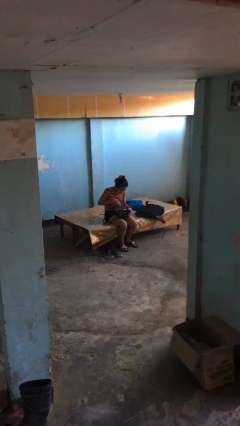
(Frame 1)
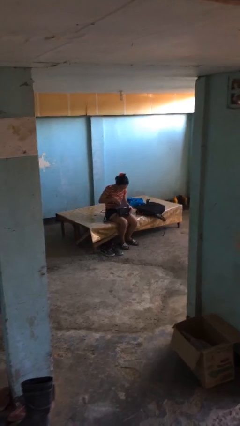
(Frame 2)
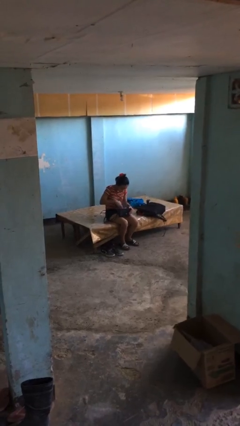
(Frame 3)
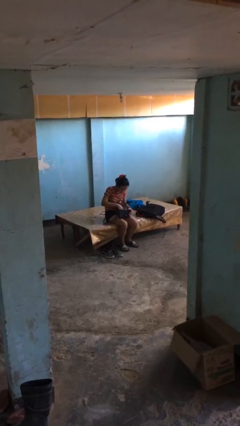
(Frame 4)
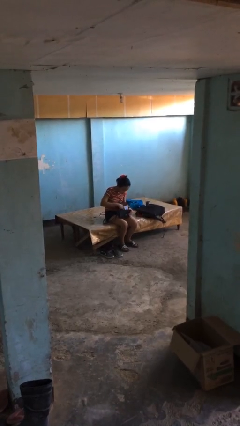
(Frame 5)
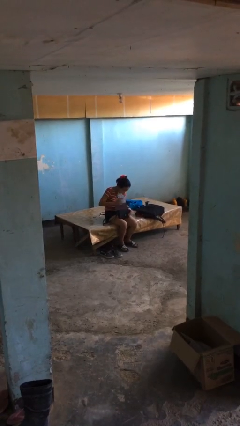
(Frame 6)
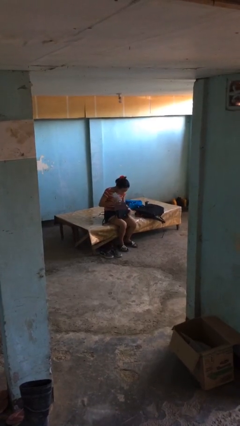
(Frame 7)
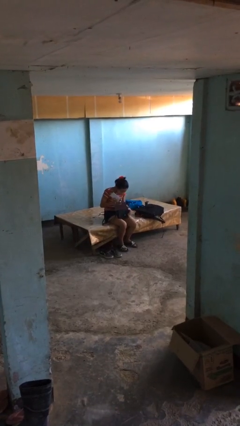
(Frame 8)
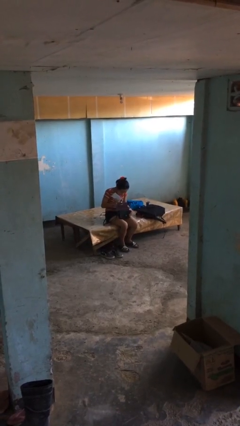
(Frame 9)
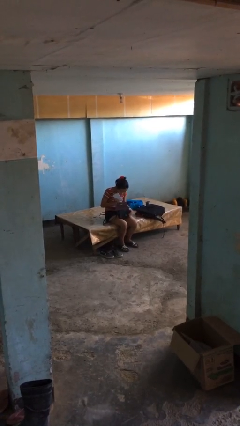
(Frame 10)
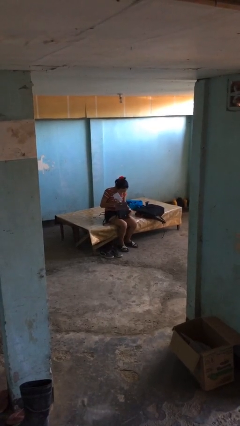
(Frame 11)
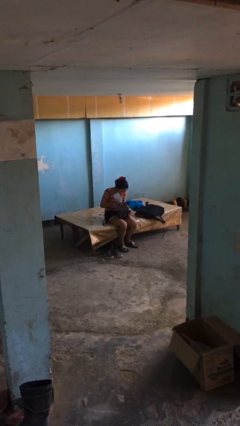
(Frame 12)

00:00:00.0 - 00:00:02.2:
person takes object from purse

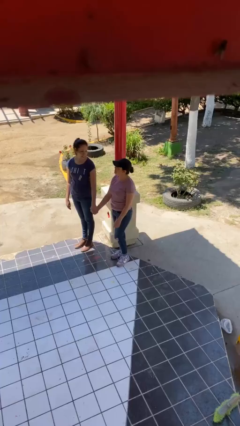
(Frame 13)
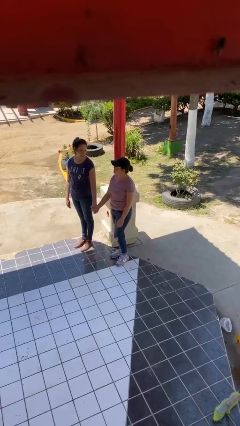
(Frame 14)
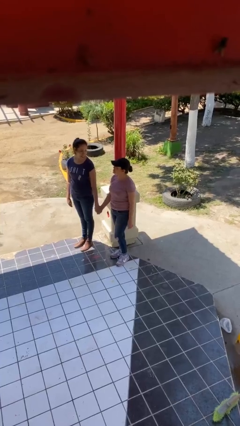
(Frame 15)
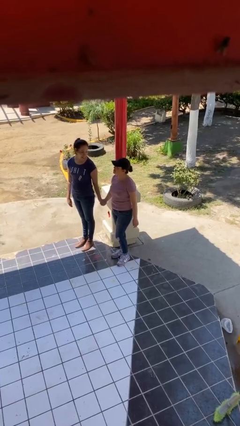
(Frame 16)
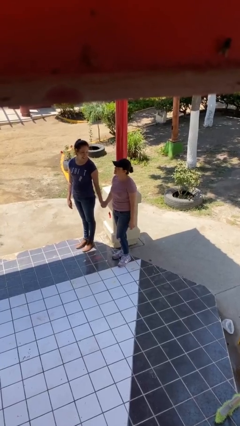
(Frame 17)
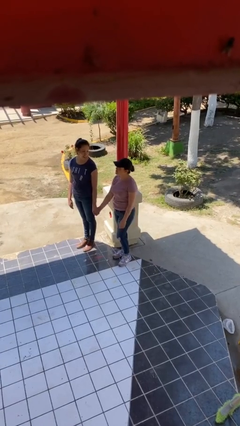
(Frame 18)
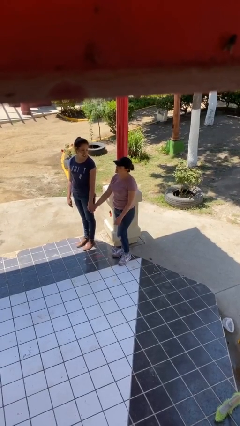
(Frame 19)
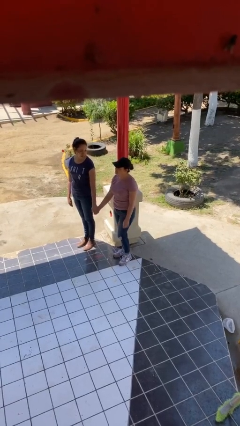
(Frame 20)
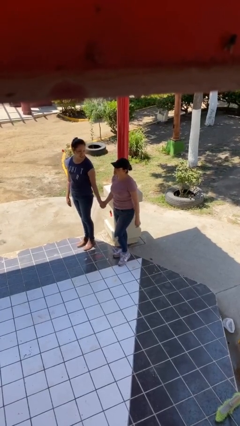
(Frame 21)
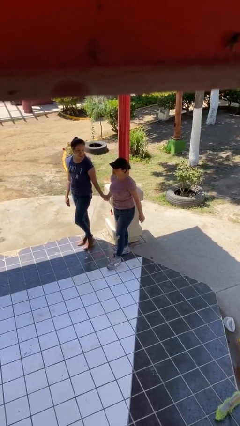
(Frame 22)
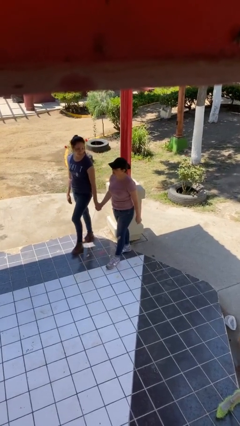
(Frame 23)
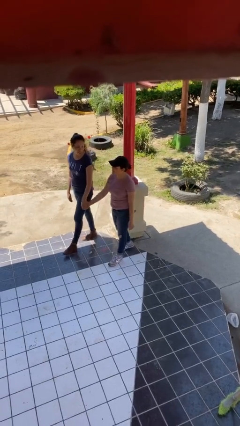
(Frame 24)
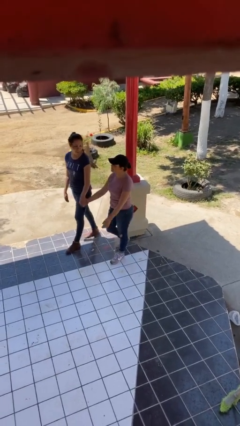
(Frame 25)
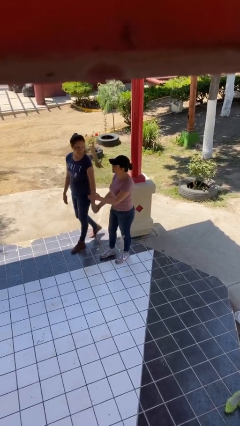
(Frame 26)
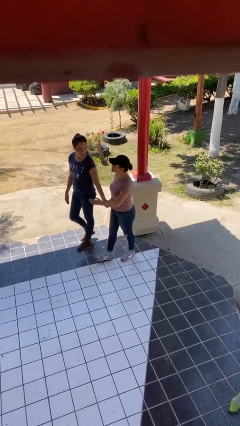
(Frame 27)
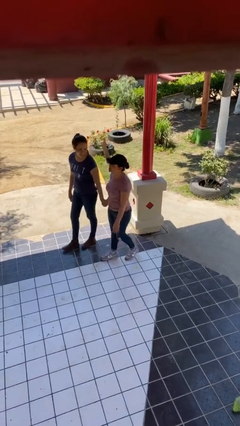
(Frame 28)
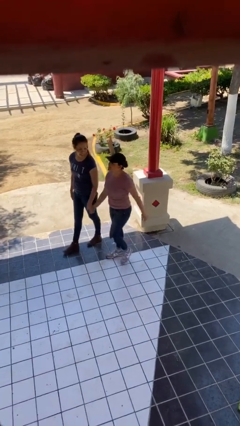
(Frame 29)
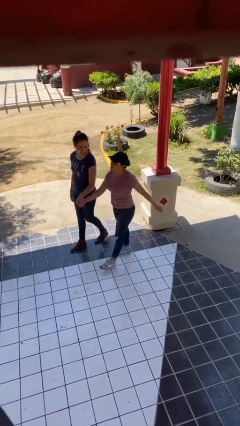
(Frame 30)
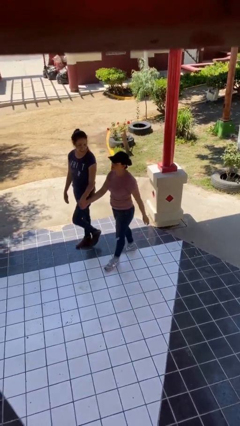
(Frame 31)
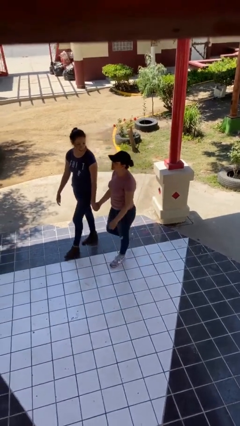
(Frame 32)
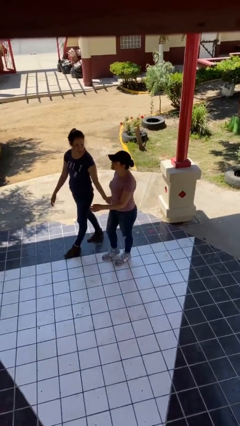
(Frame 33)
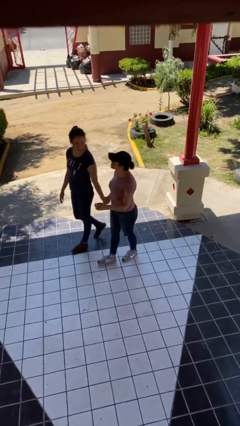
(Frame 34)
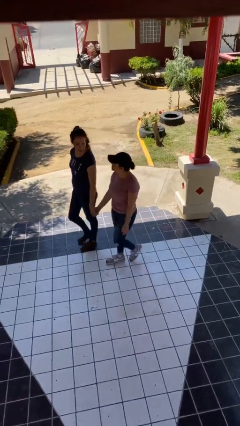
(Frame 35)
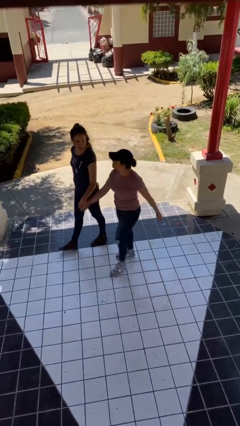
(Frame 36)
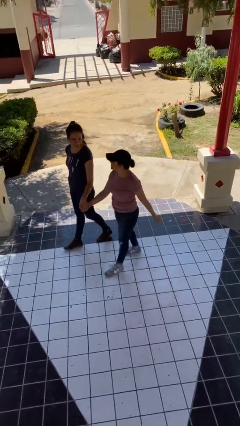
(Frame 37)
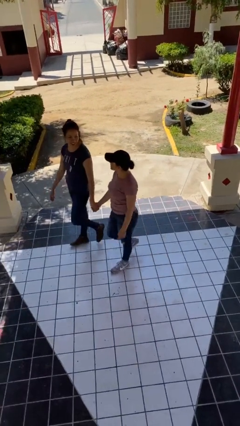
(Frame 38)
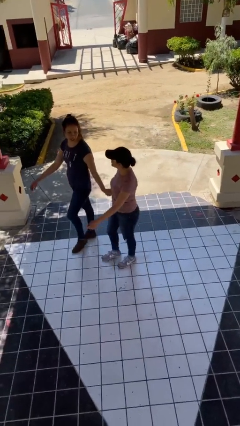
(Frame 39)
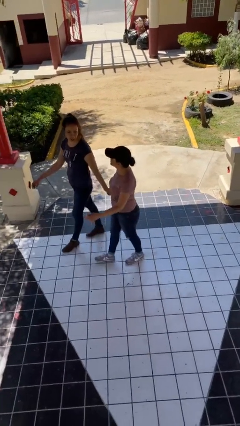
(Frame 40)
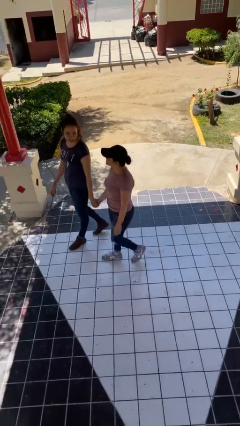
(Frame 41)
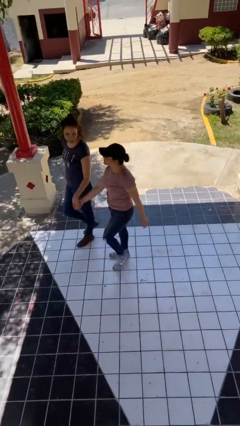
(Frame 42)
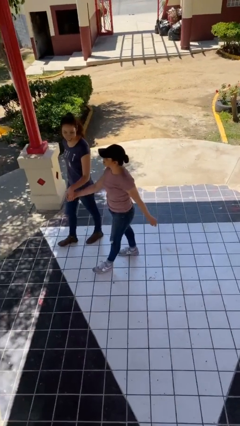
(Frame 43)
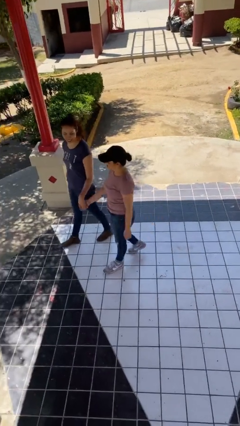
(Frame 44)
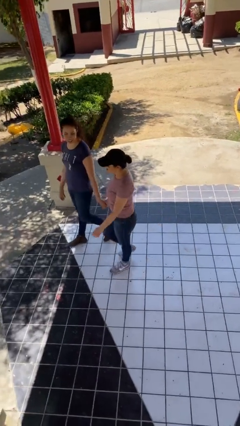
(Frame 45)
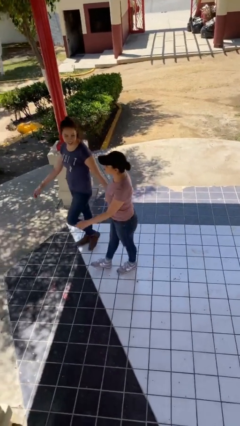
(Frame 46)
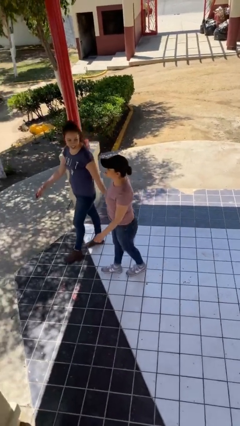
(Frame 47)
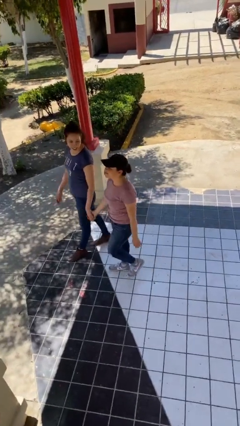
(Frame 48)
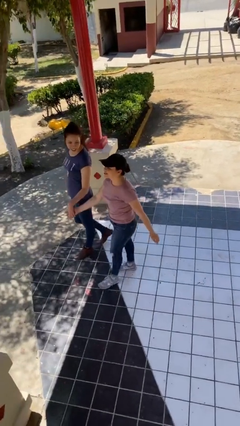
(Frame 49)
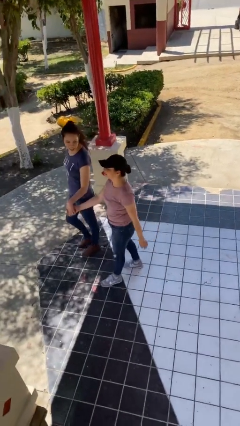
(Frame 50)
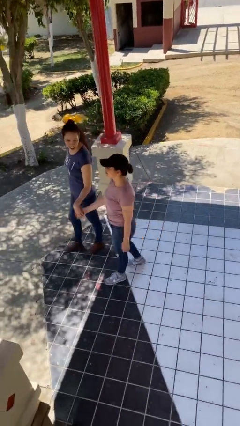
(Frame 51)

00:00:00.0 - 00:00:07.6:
person holds hand

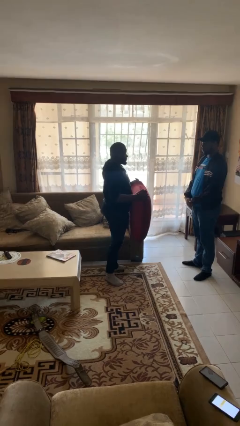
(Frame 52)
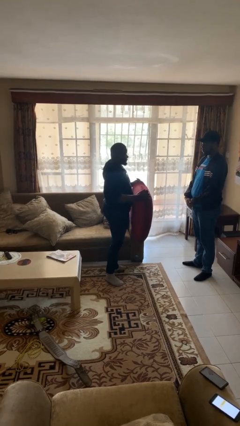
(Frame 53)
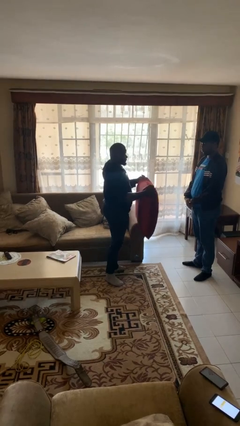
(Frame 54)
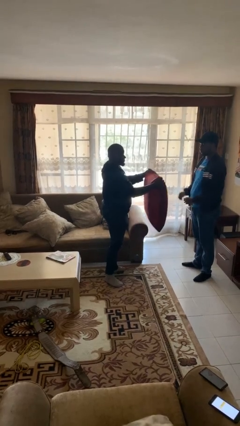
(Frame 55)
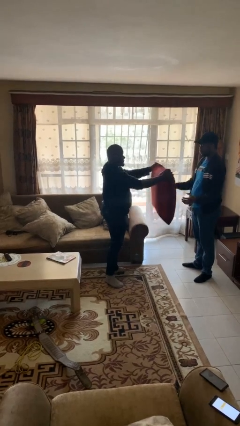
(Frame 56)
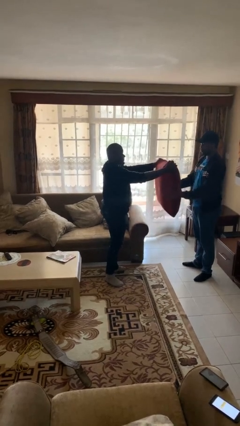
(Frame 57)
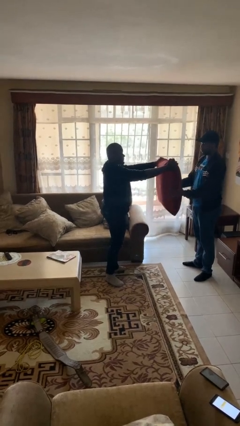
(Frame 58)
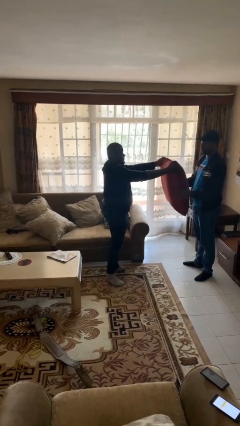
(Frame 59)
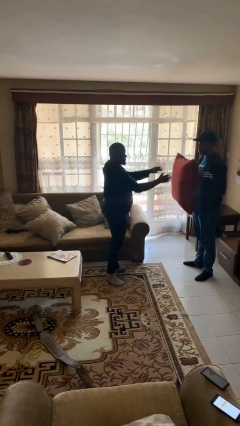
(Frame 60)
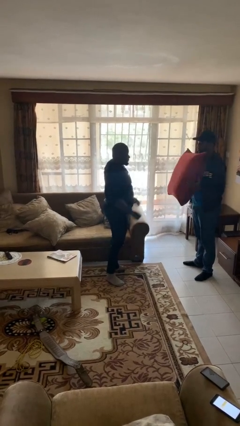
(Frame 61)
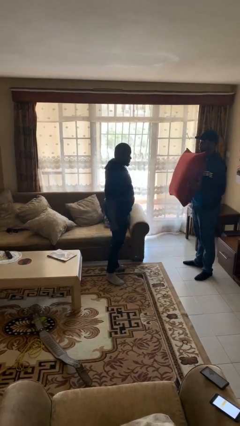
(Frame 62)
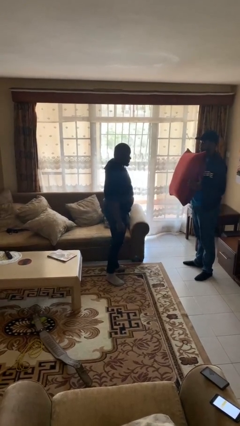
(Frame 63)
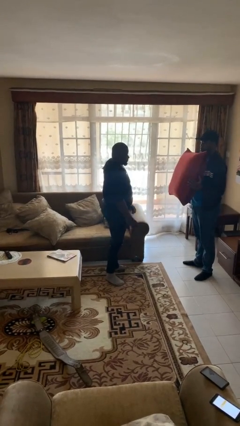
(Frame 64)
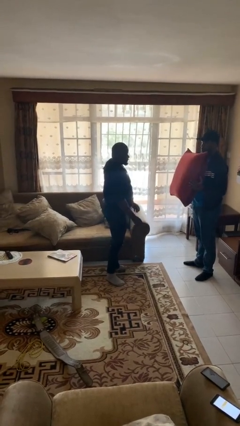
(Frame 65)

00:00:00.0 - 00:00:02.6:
person transfers object to person

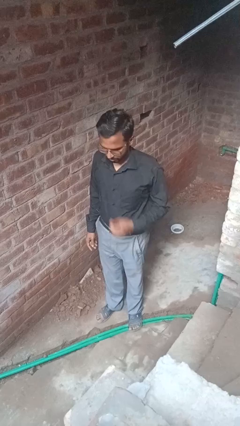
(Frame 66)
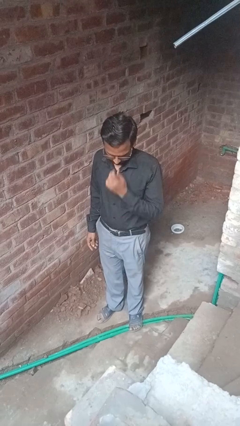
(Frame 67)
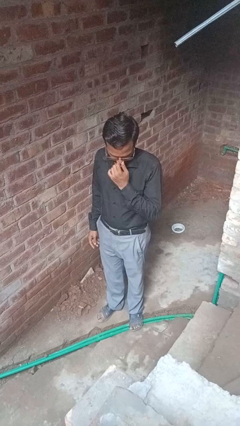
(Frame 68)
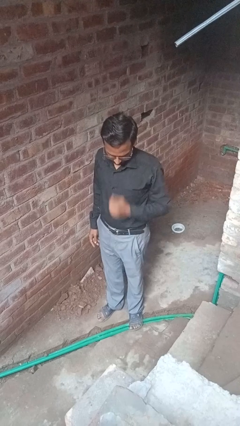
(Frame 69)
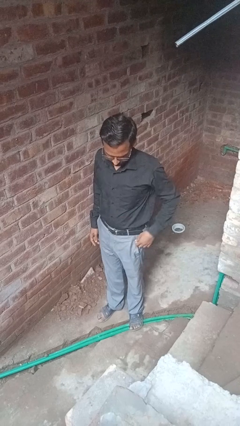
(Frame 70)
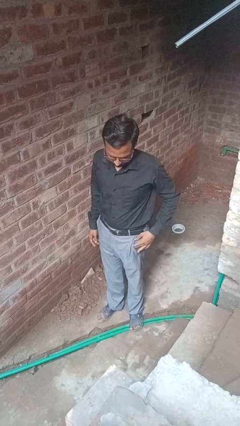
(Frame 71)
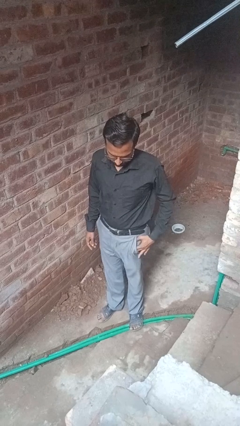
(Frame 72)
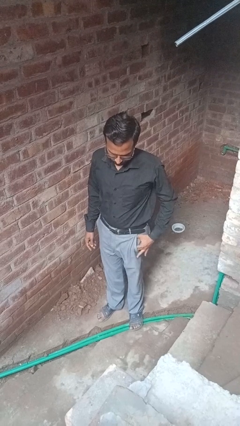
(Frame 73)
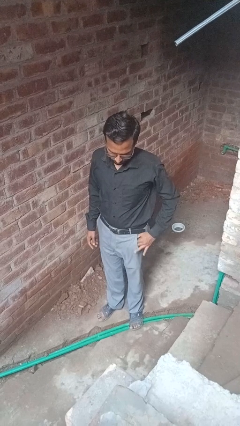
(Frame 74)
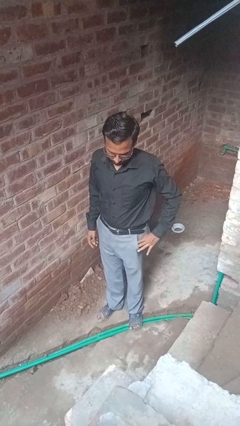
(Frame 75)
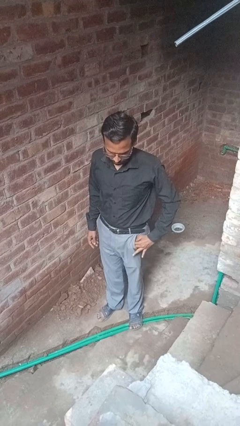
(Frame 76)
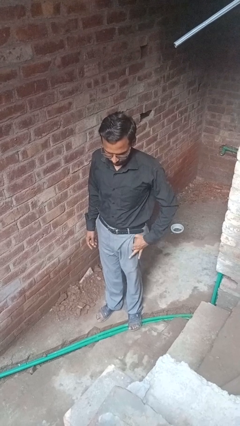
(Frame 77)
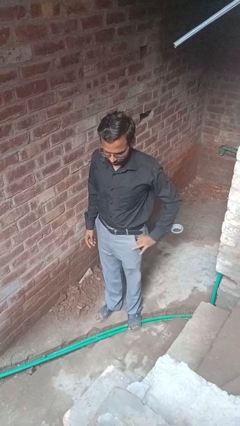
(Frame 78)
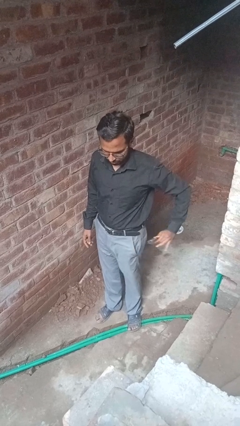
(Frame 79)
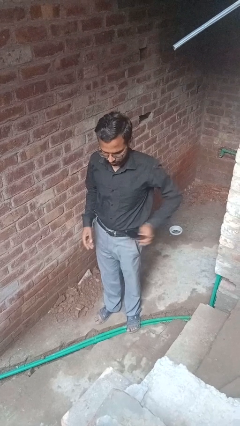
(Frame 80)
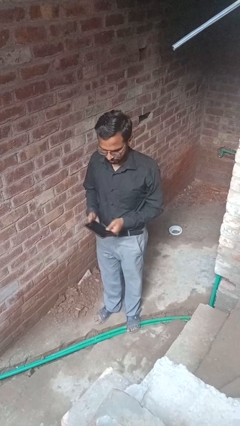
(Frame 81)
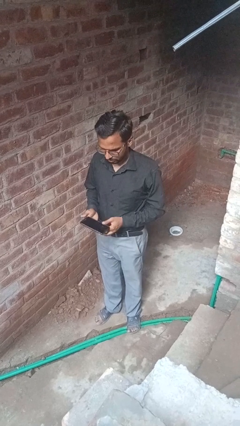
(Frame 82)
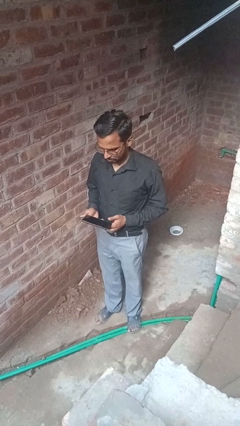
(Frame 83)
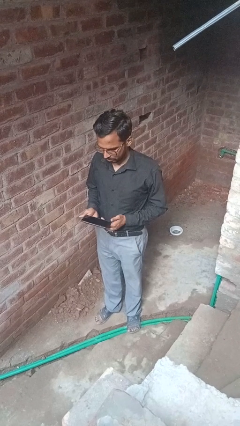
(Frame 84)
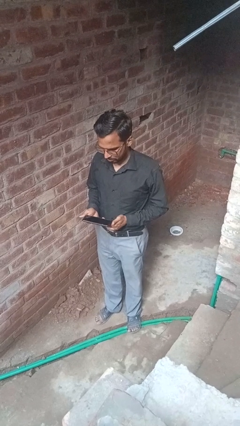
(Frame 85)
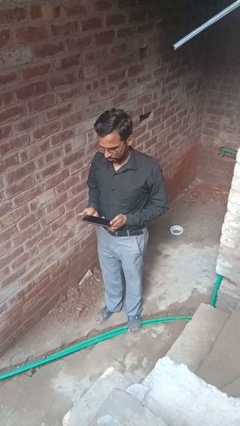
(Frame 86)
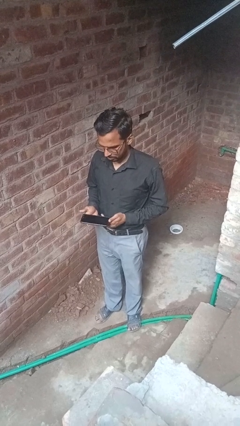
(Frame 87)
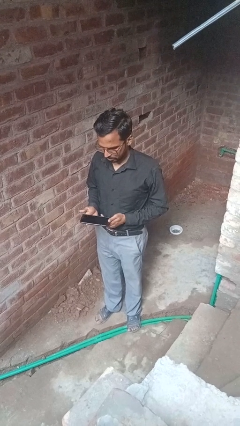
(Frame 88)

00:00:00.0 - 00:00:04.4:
person takes phone from pocket

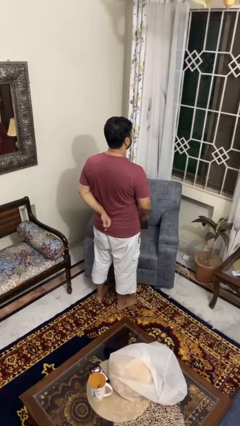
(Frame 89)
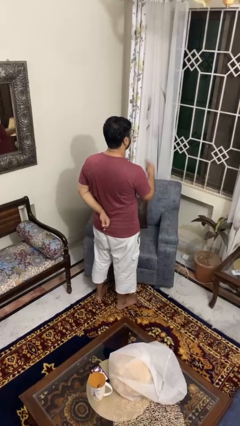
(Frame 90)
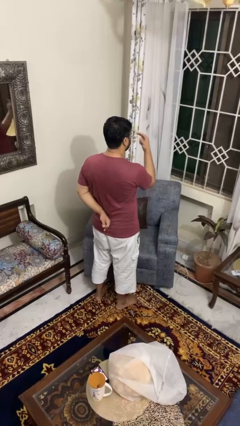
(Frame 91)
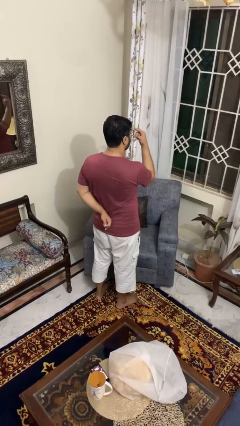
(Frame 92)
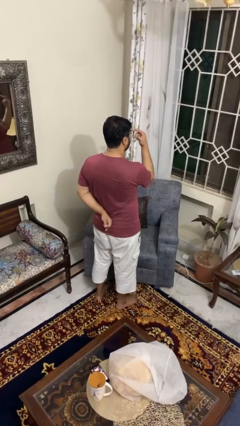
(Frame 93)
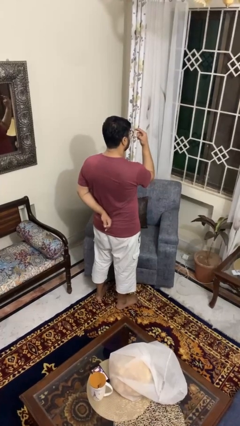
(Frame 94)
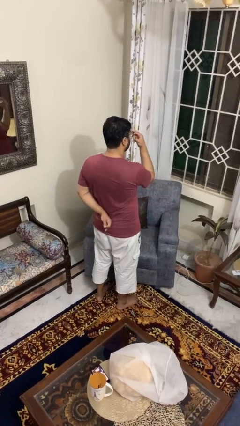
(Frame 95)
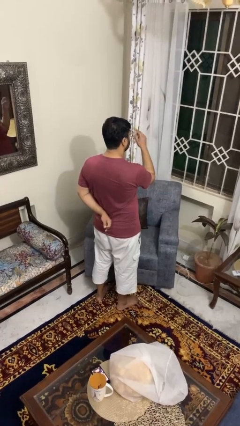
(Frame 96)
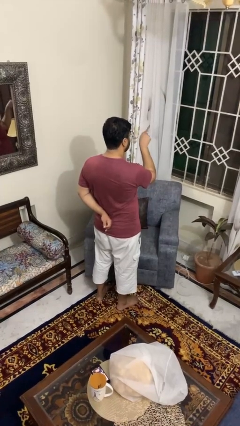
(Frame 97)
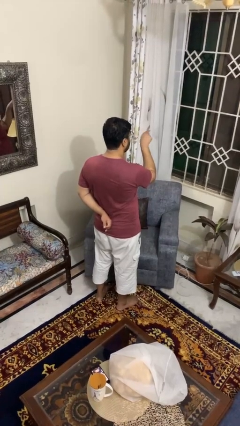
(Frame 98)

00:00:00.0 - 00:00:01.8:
person gestures watch closely
